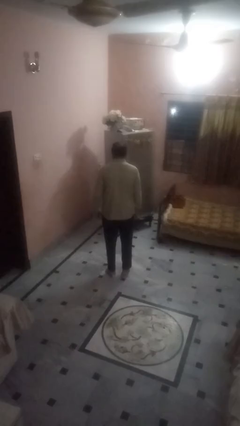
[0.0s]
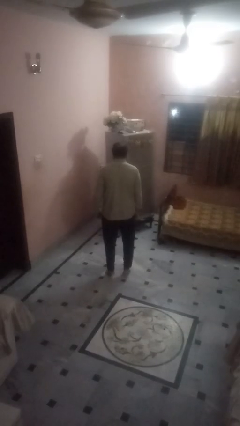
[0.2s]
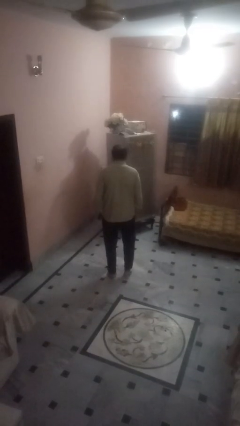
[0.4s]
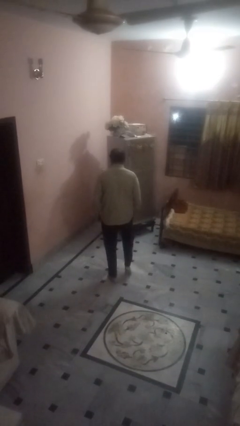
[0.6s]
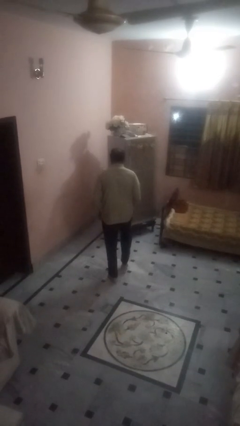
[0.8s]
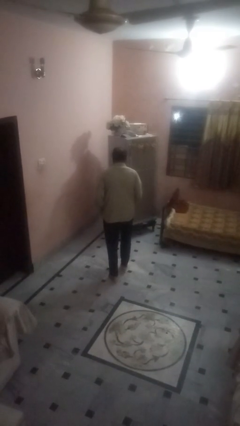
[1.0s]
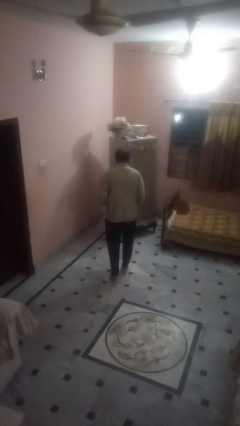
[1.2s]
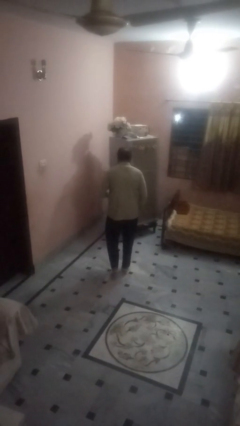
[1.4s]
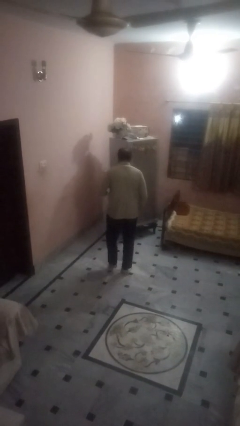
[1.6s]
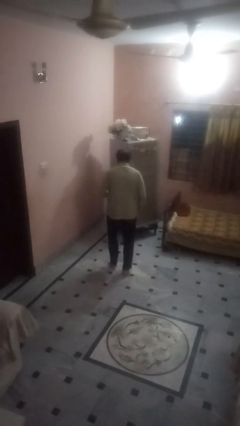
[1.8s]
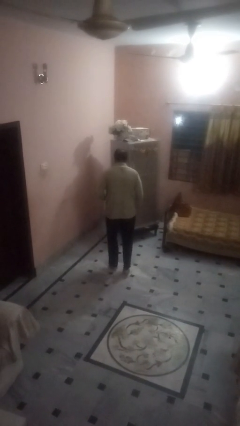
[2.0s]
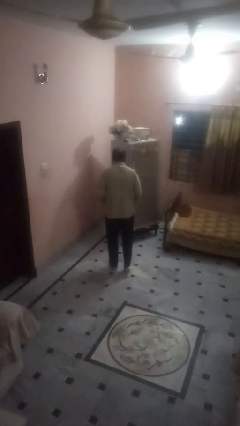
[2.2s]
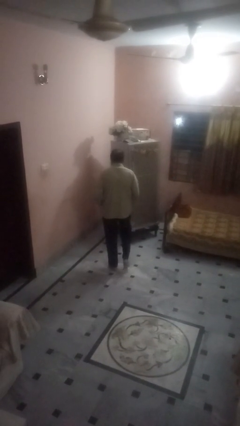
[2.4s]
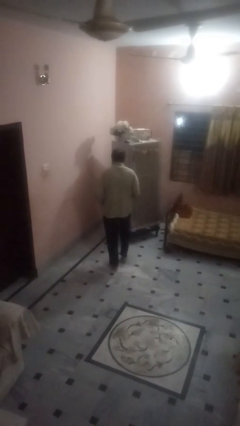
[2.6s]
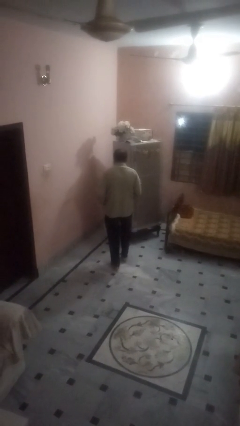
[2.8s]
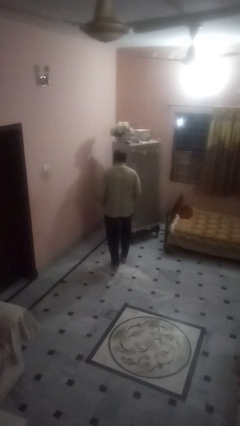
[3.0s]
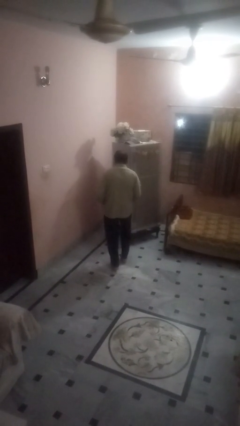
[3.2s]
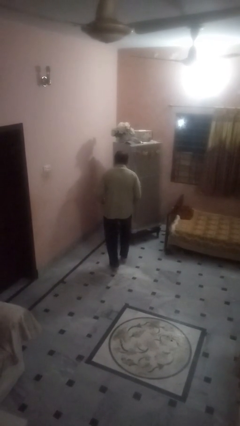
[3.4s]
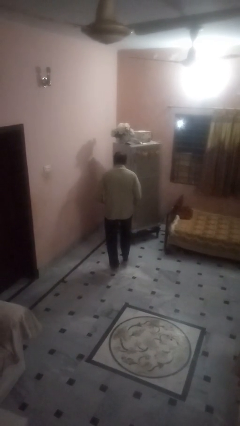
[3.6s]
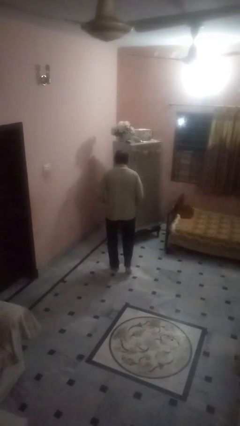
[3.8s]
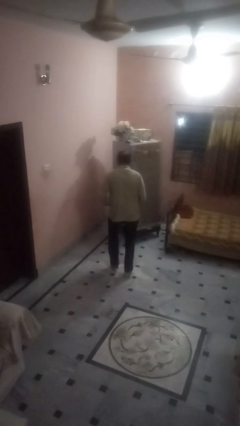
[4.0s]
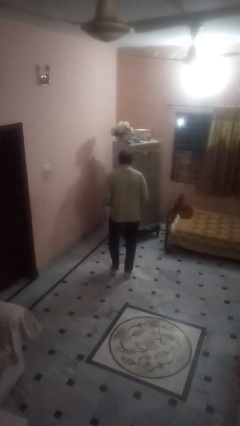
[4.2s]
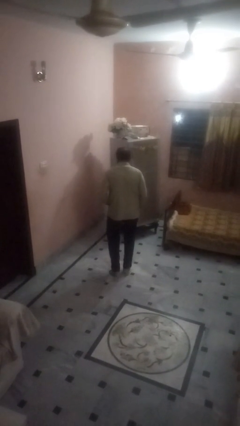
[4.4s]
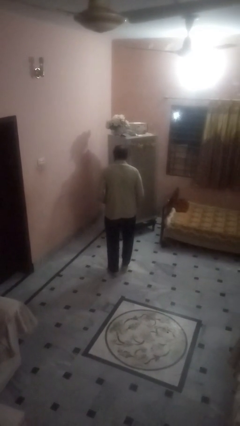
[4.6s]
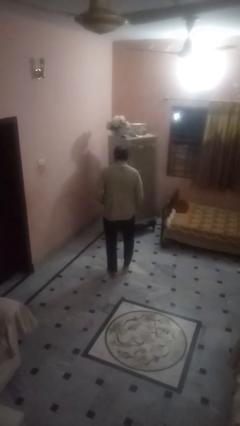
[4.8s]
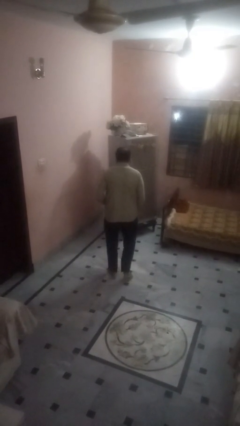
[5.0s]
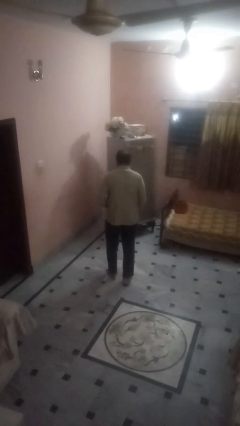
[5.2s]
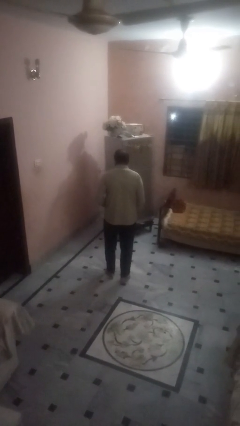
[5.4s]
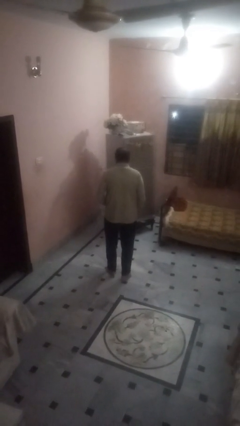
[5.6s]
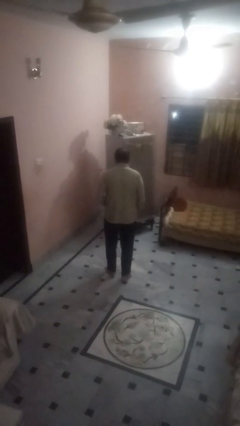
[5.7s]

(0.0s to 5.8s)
person walks tiptoe

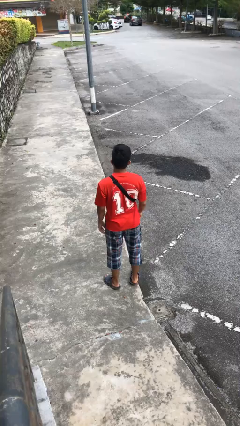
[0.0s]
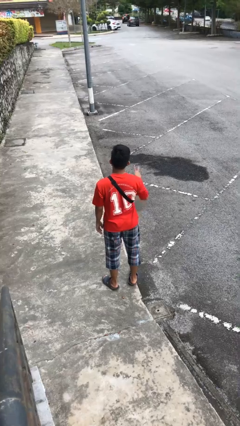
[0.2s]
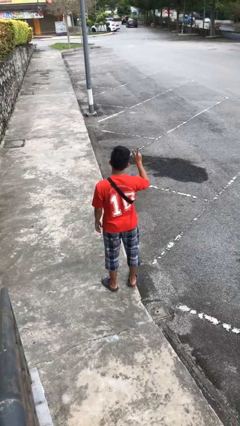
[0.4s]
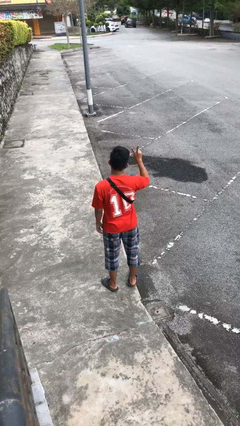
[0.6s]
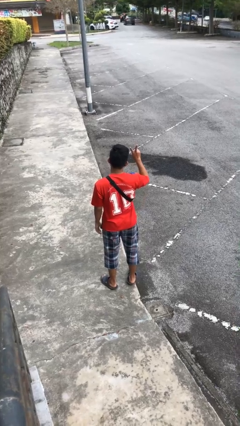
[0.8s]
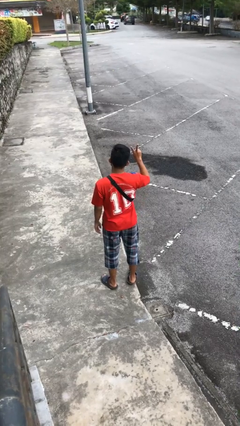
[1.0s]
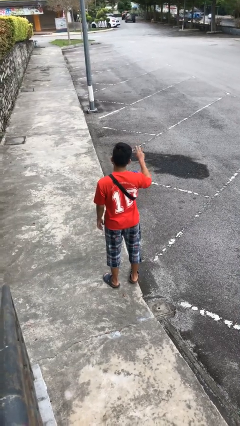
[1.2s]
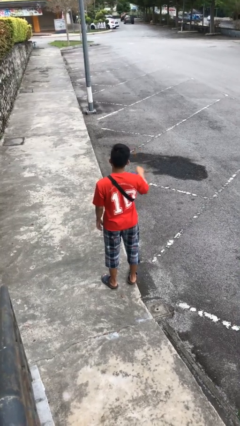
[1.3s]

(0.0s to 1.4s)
person gestures peace

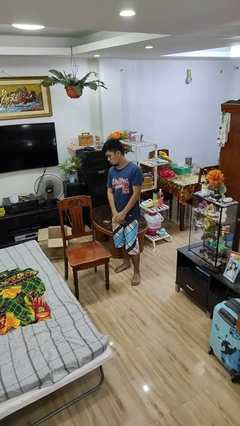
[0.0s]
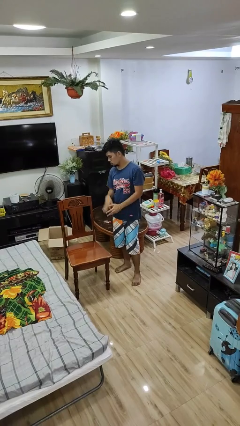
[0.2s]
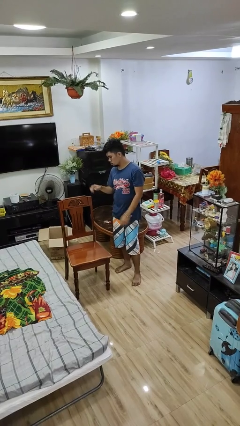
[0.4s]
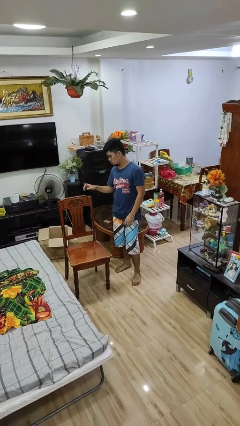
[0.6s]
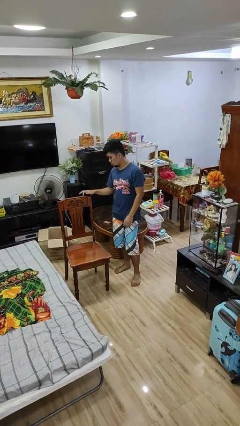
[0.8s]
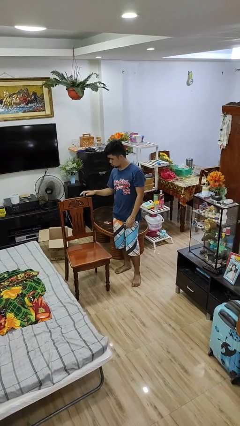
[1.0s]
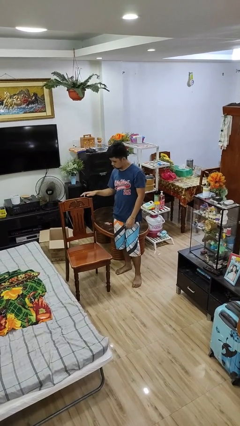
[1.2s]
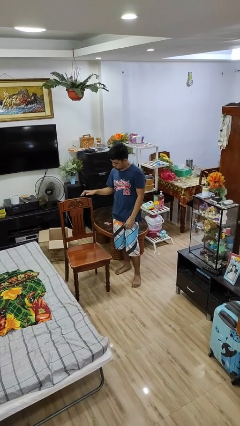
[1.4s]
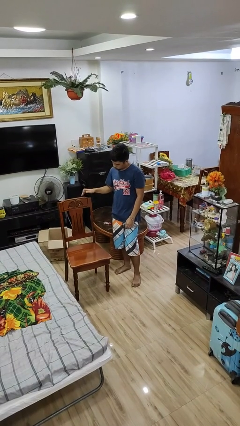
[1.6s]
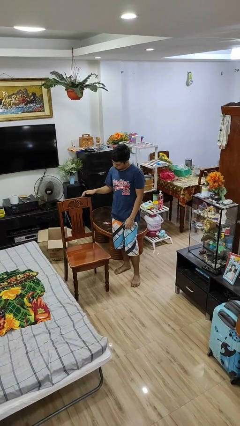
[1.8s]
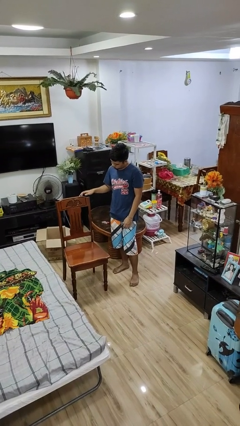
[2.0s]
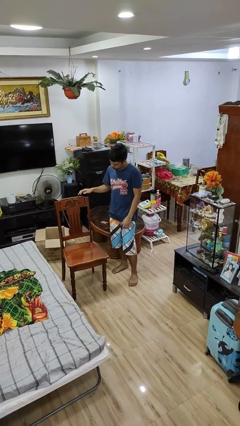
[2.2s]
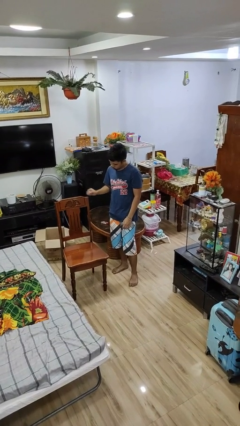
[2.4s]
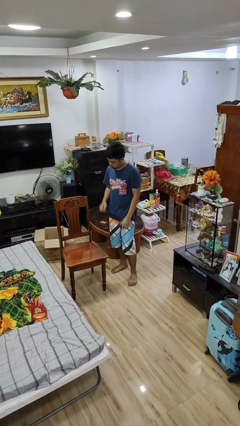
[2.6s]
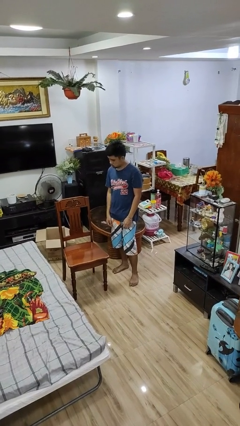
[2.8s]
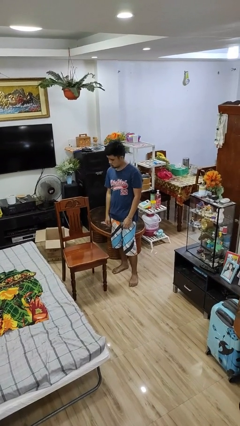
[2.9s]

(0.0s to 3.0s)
person taps object with finger

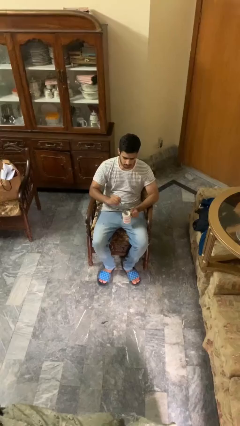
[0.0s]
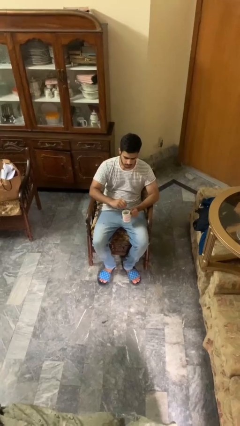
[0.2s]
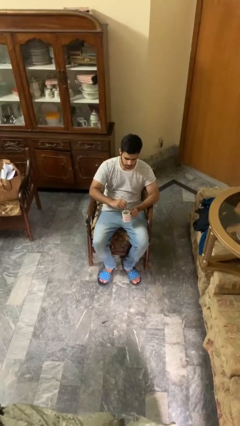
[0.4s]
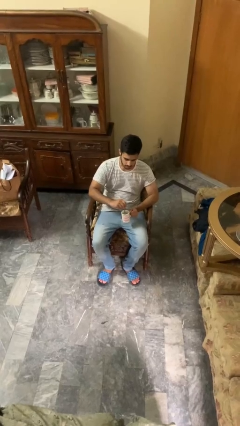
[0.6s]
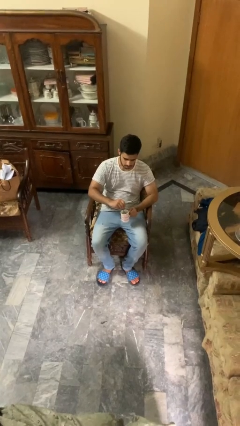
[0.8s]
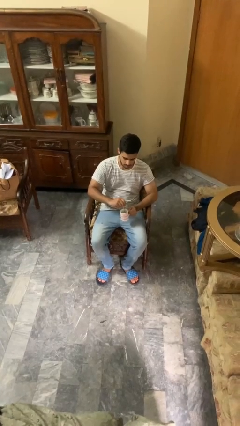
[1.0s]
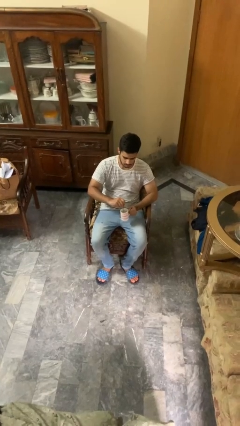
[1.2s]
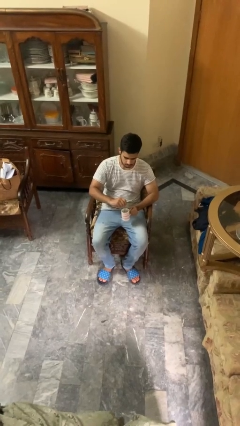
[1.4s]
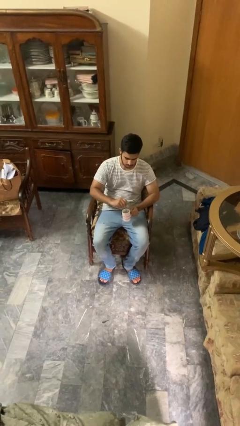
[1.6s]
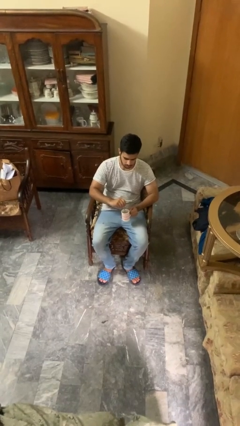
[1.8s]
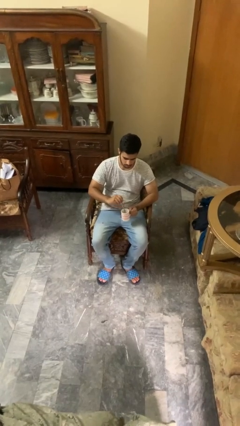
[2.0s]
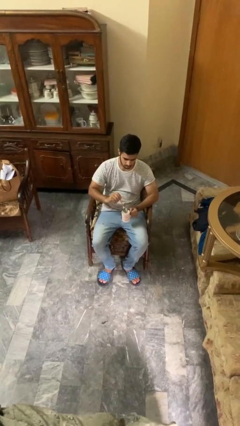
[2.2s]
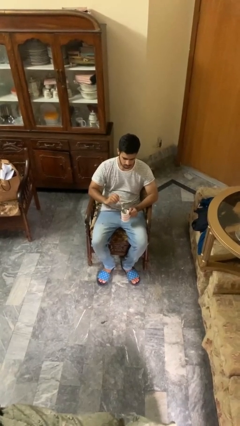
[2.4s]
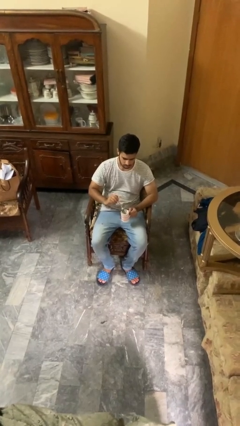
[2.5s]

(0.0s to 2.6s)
person stirs mug

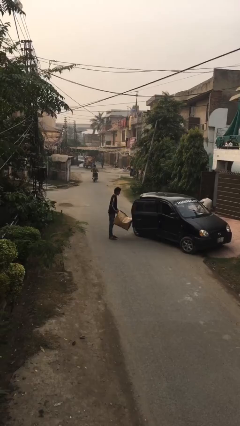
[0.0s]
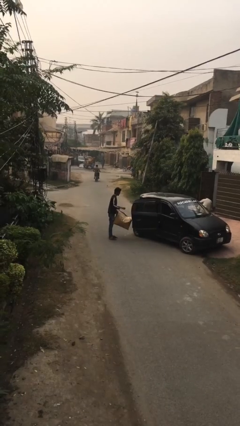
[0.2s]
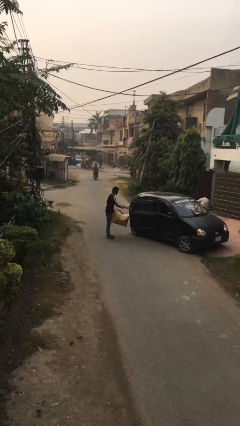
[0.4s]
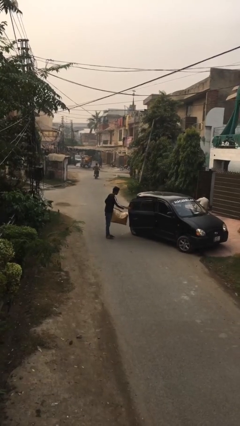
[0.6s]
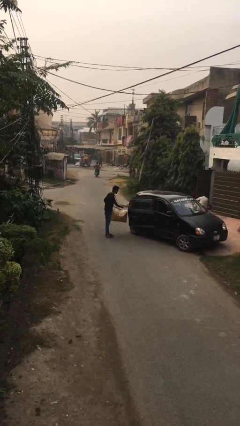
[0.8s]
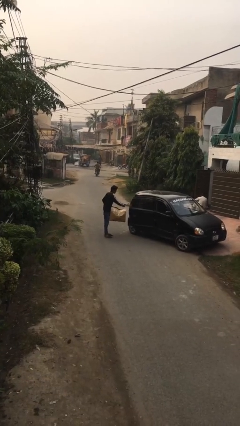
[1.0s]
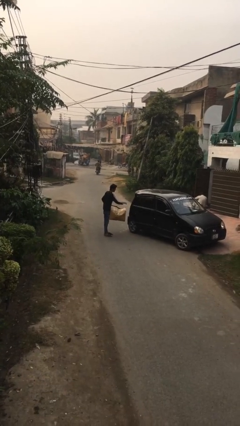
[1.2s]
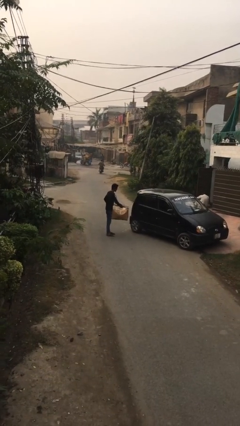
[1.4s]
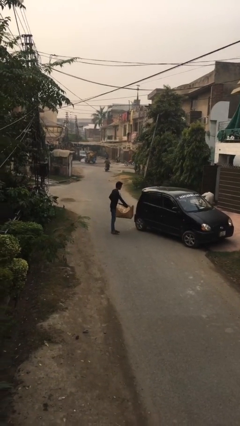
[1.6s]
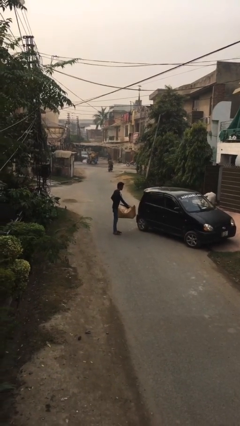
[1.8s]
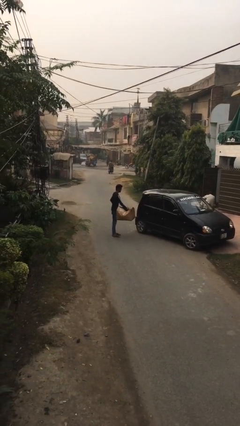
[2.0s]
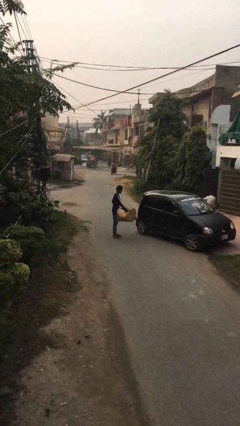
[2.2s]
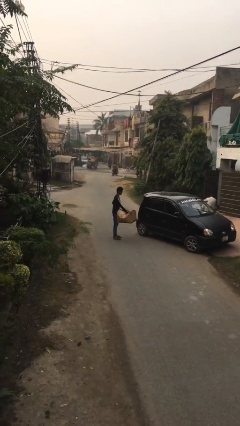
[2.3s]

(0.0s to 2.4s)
person closes car door

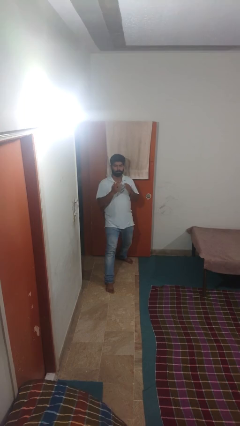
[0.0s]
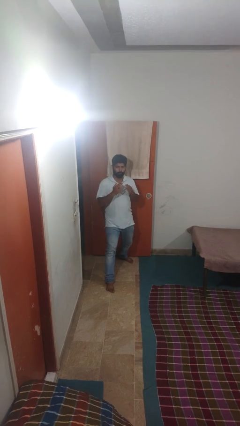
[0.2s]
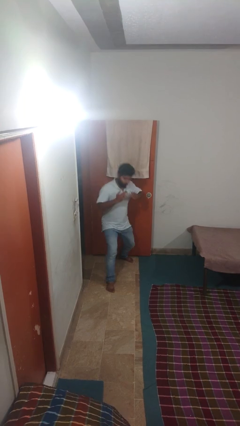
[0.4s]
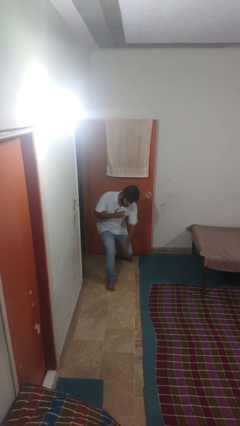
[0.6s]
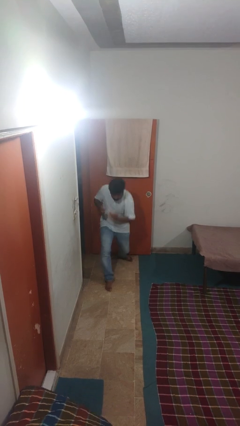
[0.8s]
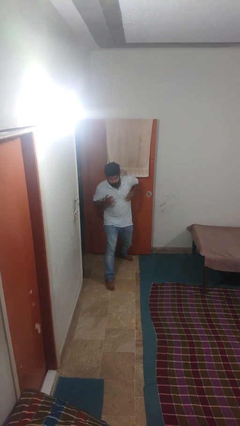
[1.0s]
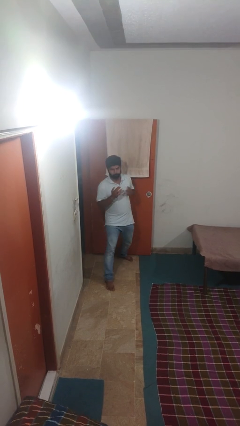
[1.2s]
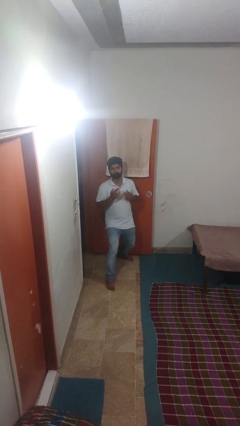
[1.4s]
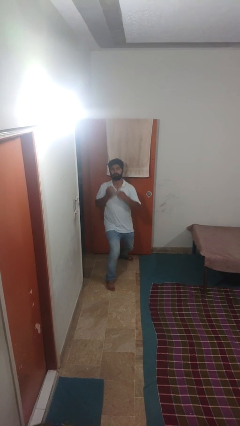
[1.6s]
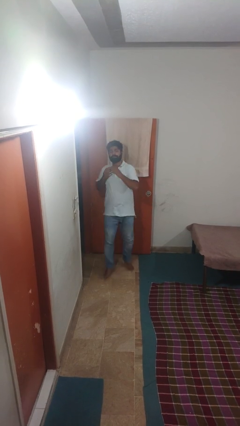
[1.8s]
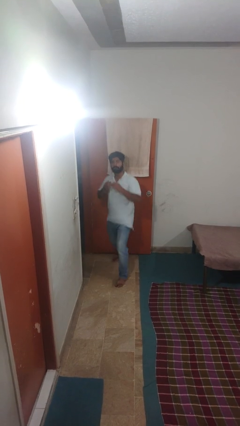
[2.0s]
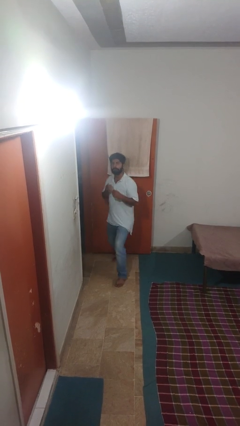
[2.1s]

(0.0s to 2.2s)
person karate chop
